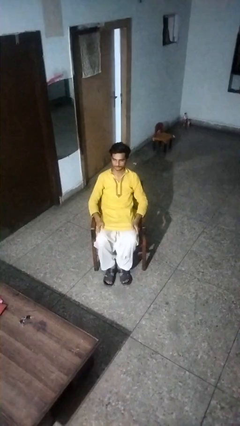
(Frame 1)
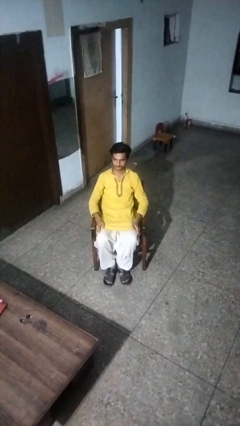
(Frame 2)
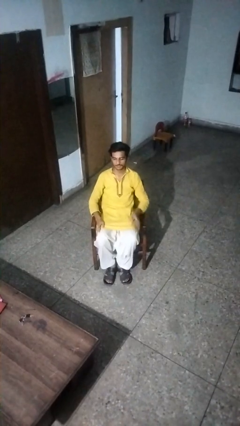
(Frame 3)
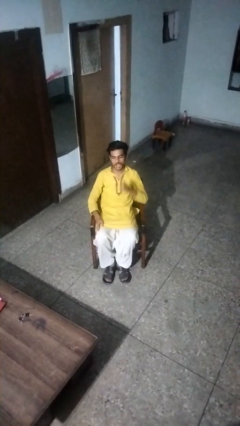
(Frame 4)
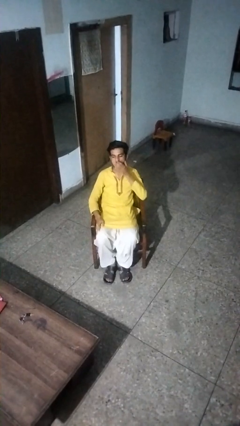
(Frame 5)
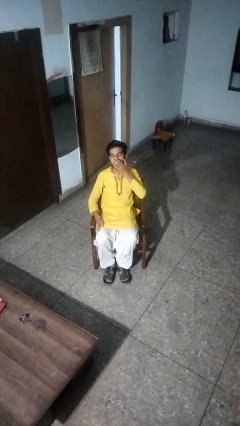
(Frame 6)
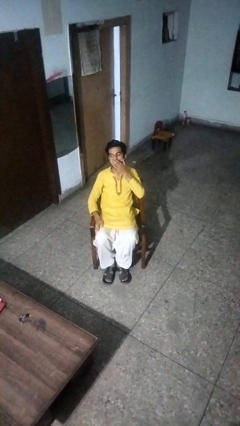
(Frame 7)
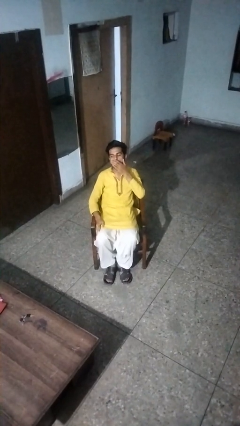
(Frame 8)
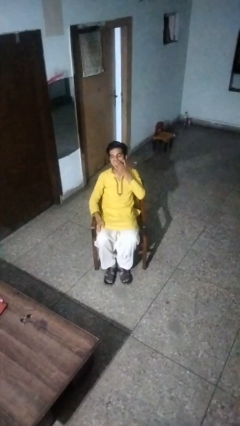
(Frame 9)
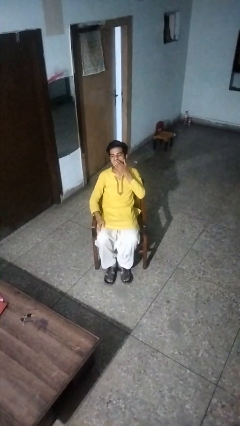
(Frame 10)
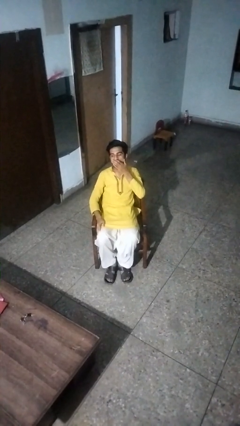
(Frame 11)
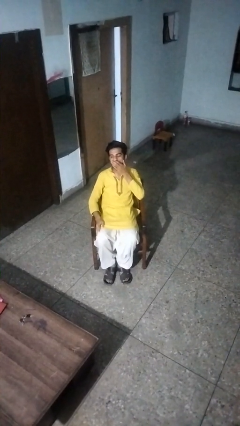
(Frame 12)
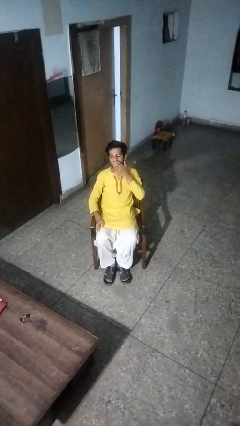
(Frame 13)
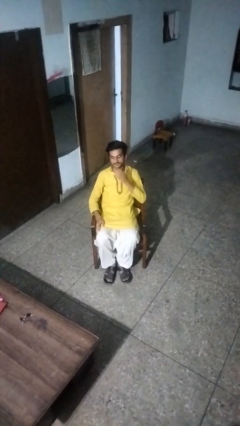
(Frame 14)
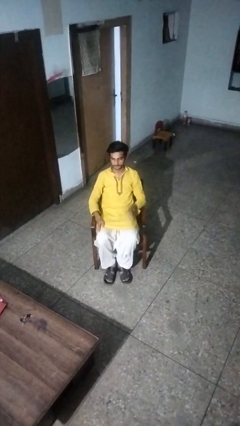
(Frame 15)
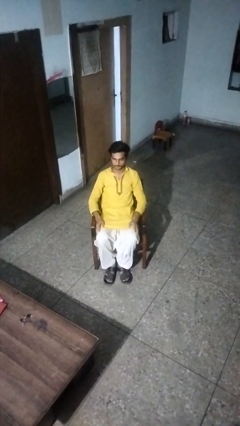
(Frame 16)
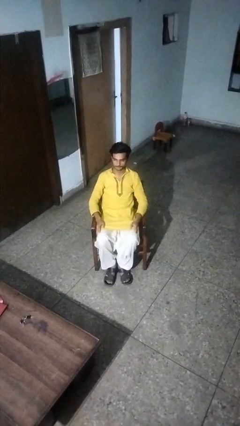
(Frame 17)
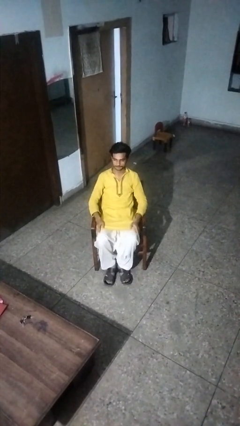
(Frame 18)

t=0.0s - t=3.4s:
person yawns

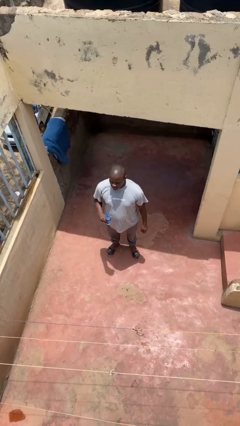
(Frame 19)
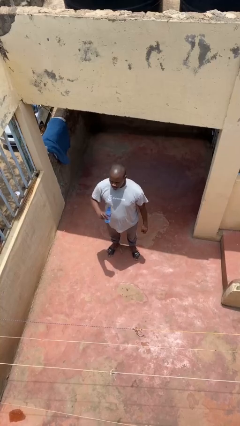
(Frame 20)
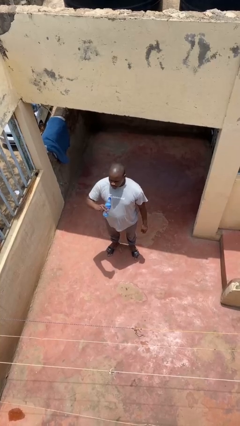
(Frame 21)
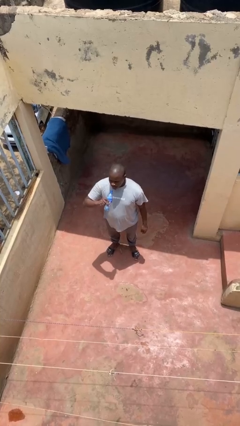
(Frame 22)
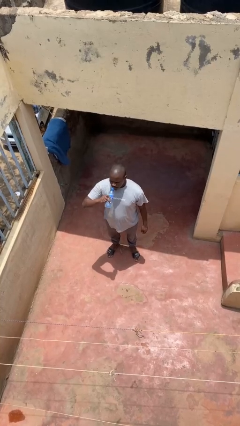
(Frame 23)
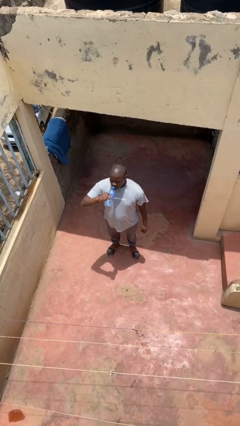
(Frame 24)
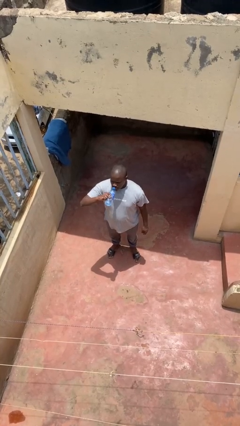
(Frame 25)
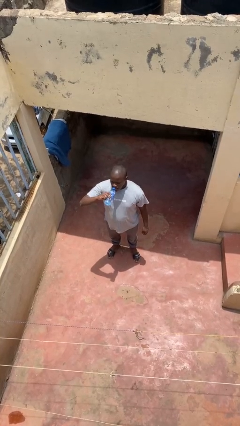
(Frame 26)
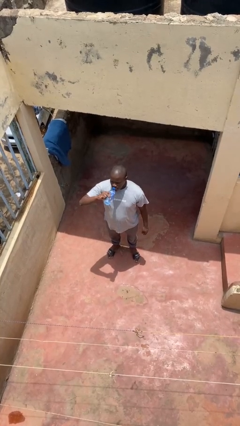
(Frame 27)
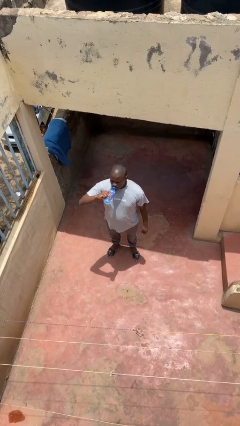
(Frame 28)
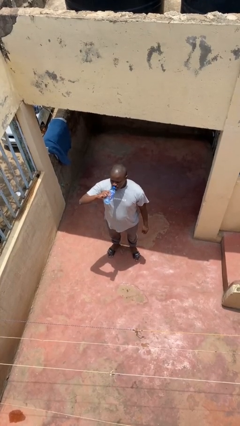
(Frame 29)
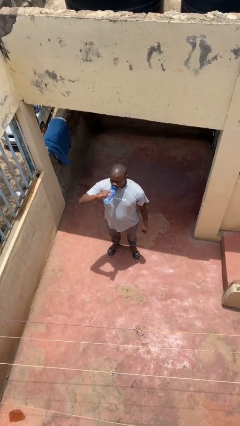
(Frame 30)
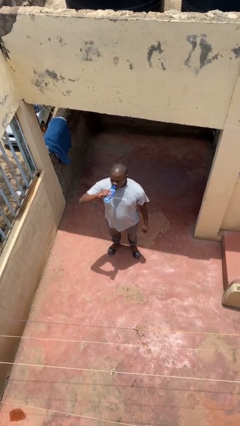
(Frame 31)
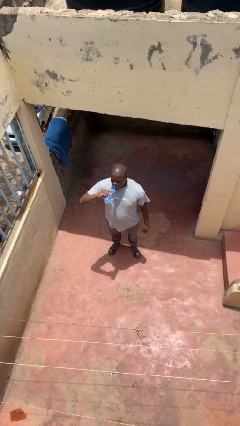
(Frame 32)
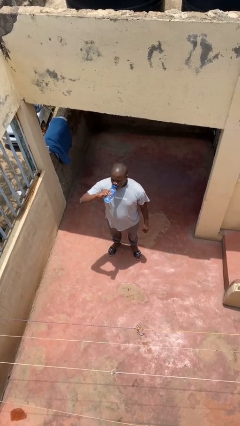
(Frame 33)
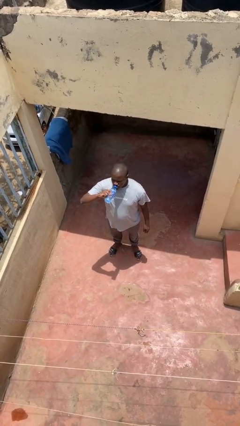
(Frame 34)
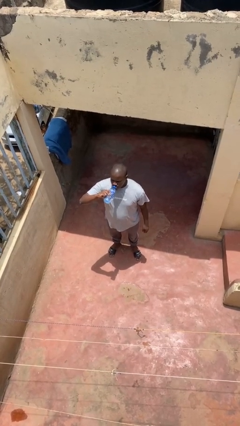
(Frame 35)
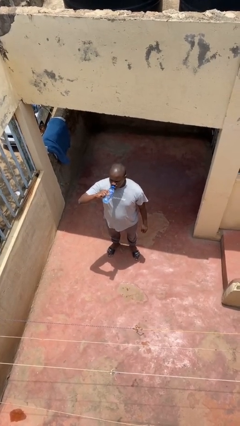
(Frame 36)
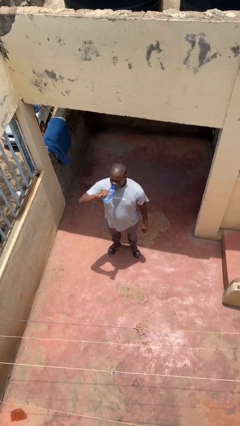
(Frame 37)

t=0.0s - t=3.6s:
person drinks from bottle

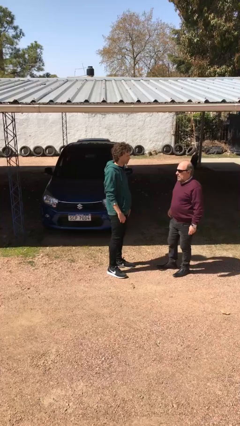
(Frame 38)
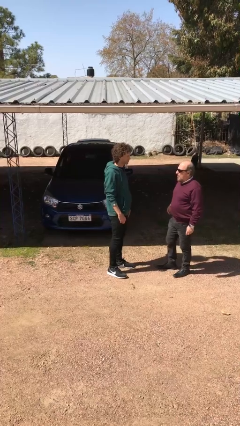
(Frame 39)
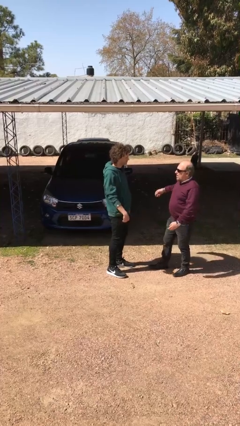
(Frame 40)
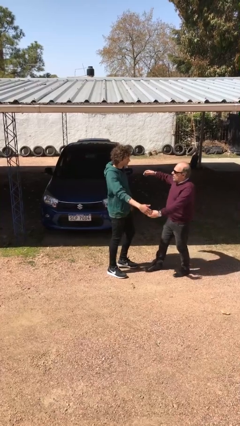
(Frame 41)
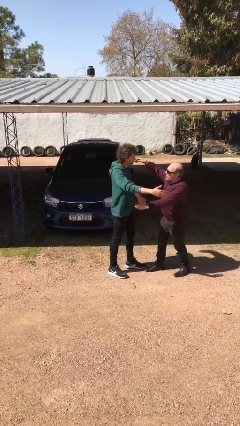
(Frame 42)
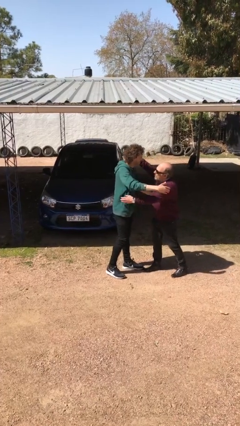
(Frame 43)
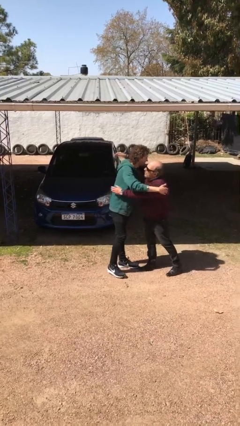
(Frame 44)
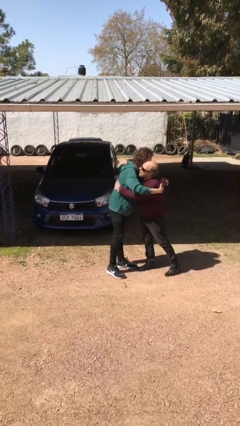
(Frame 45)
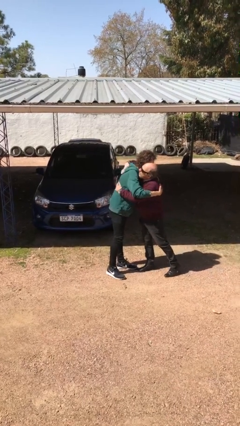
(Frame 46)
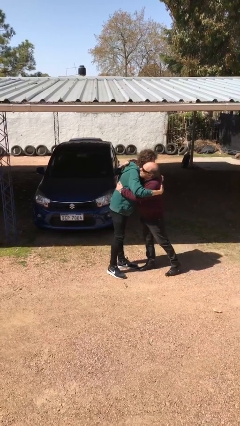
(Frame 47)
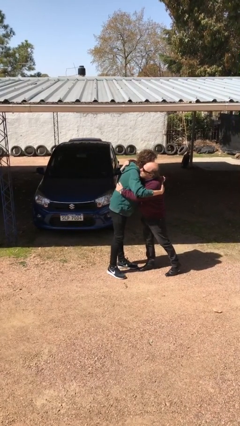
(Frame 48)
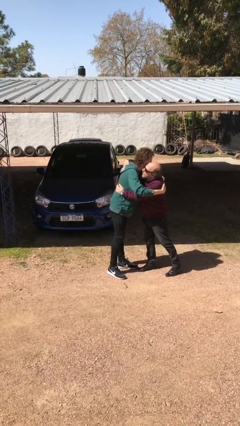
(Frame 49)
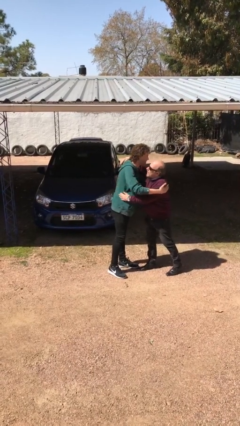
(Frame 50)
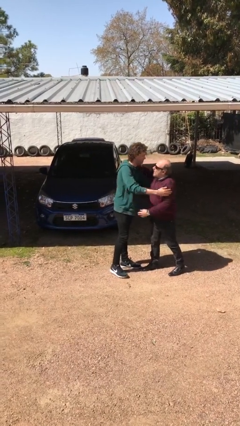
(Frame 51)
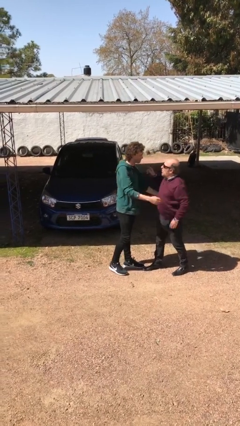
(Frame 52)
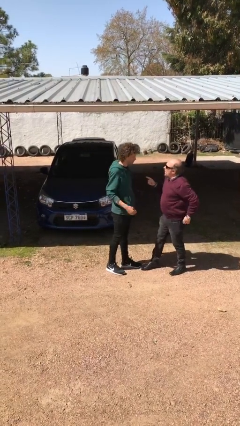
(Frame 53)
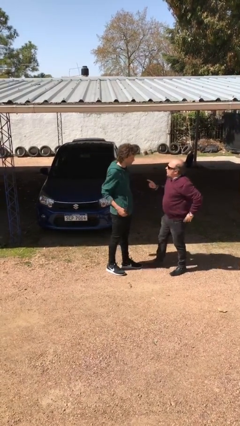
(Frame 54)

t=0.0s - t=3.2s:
person embraces person

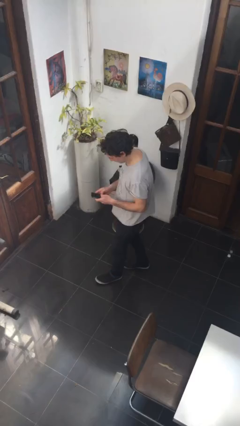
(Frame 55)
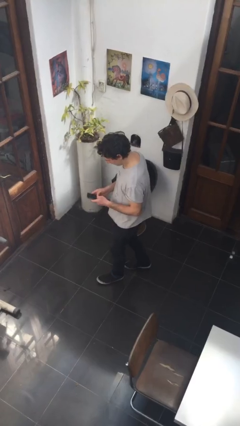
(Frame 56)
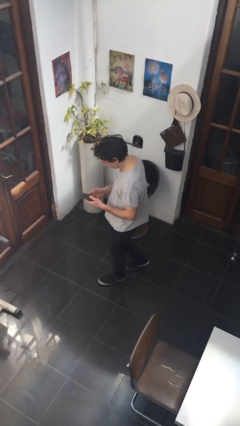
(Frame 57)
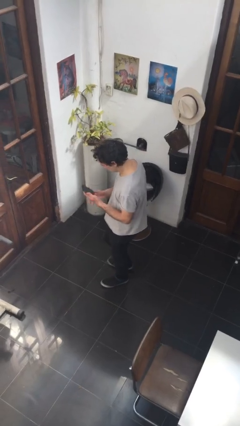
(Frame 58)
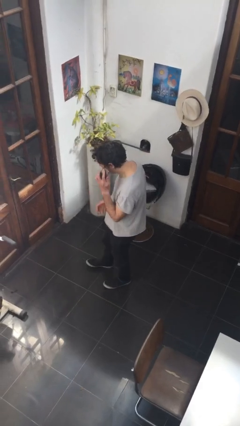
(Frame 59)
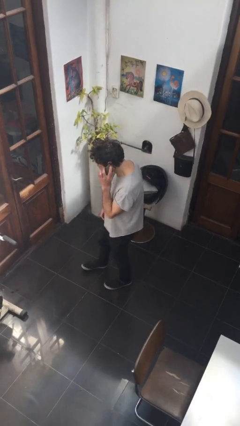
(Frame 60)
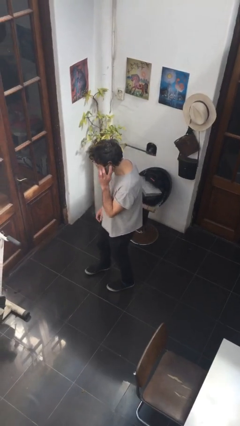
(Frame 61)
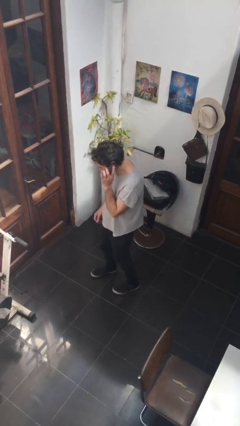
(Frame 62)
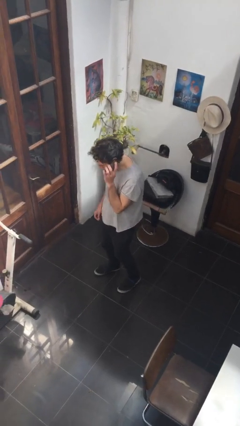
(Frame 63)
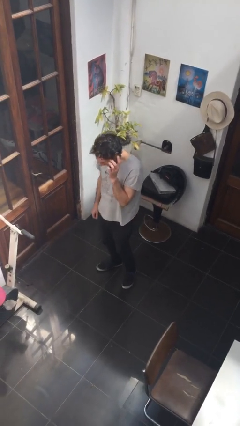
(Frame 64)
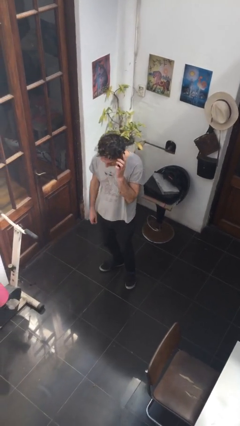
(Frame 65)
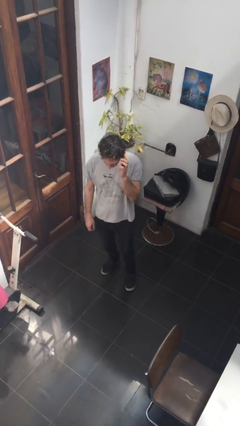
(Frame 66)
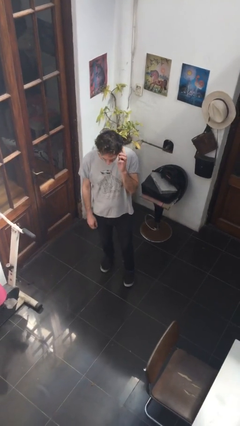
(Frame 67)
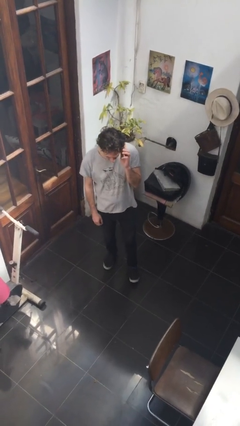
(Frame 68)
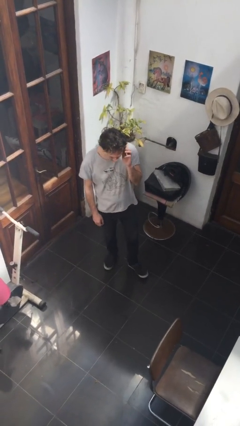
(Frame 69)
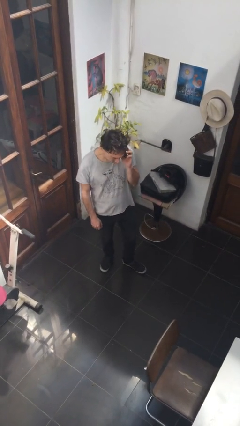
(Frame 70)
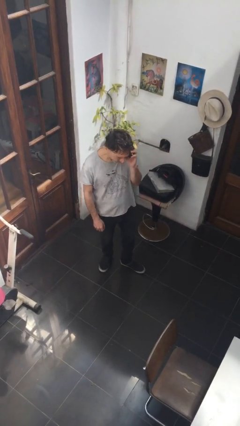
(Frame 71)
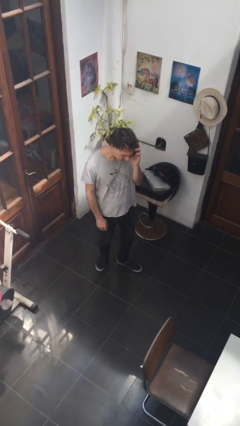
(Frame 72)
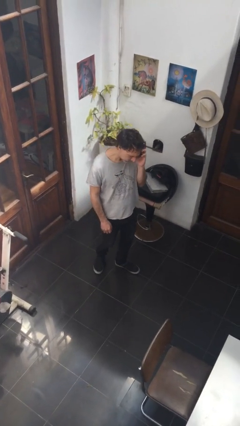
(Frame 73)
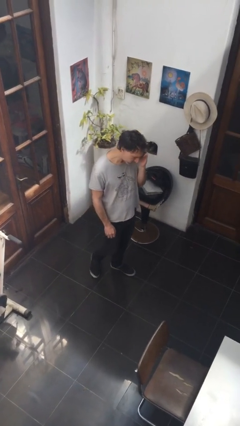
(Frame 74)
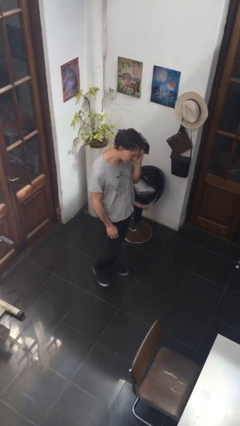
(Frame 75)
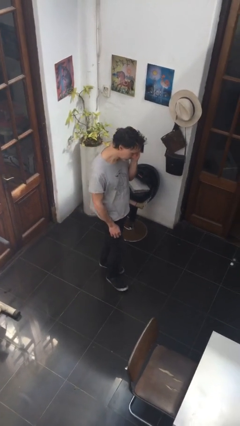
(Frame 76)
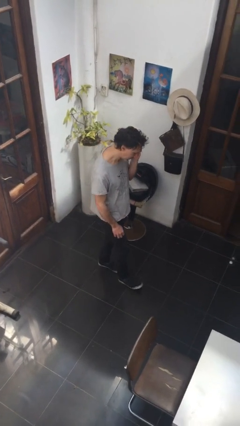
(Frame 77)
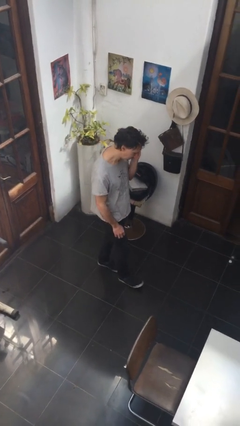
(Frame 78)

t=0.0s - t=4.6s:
person talks on phone

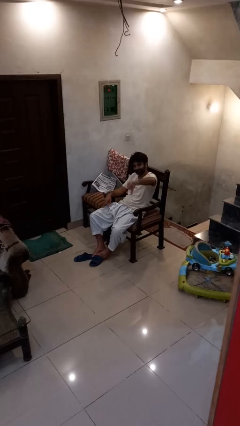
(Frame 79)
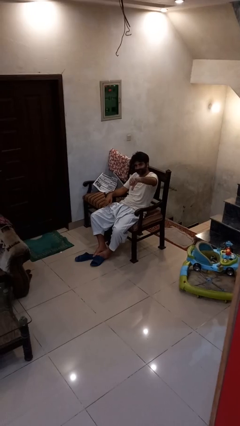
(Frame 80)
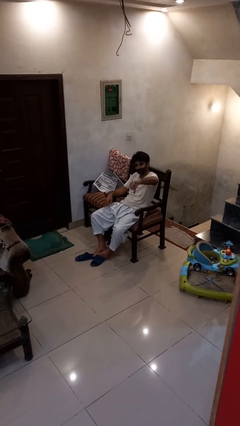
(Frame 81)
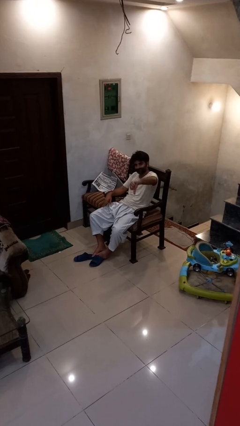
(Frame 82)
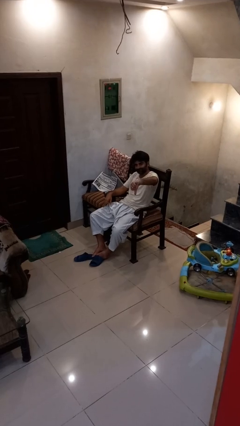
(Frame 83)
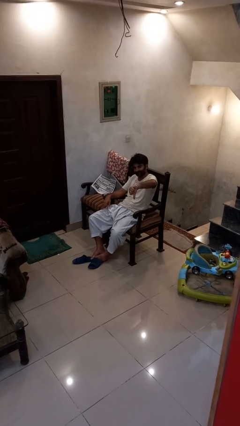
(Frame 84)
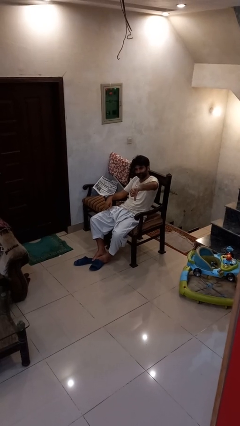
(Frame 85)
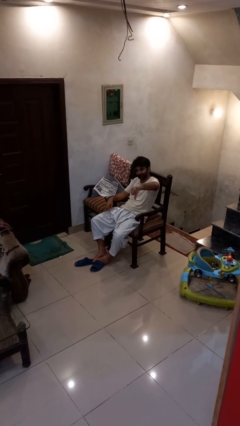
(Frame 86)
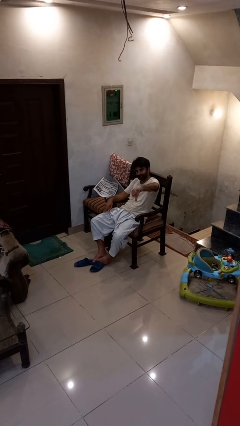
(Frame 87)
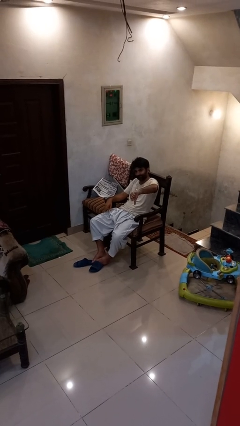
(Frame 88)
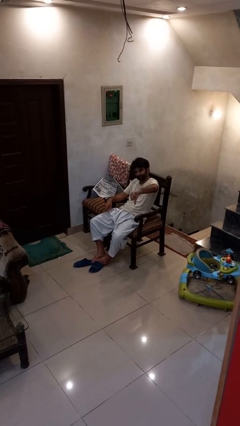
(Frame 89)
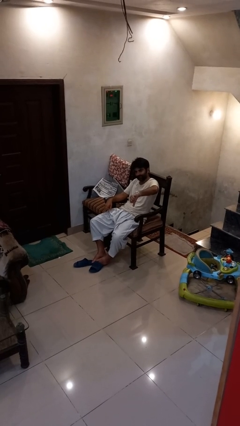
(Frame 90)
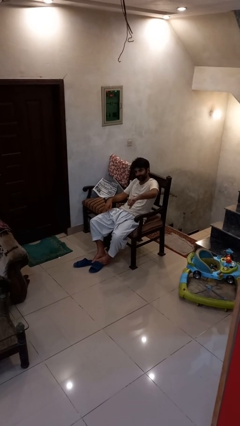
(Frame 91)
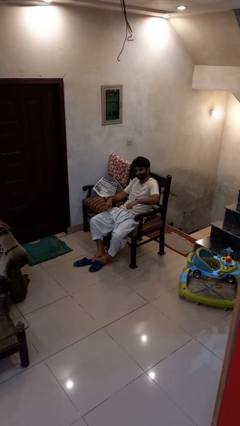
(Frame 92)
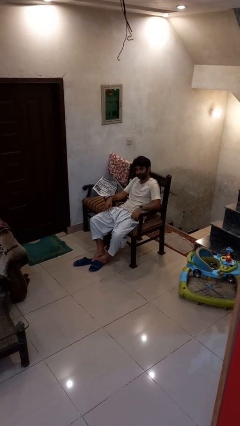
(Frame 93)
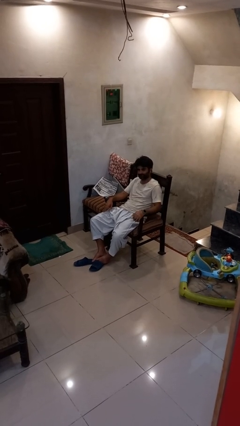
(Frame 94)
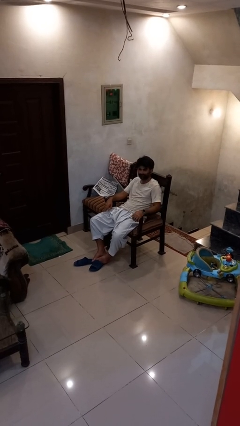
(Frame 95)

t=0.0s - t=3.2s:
person gestures thumbs down
